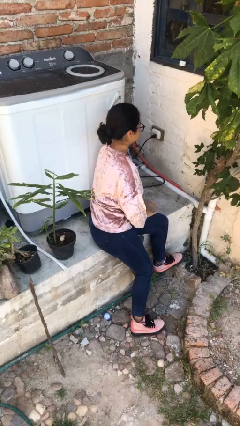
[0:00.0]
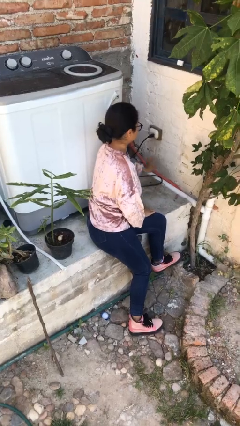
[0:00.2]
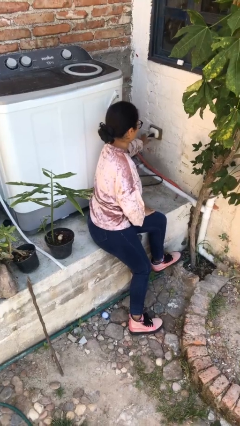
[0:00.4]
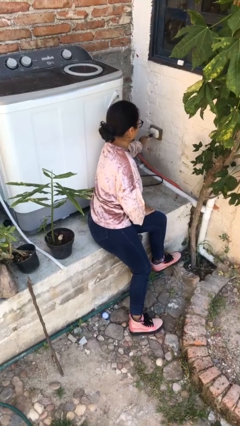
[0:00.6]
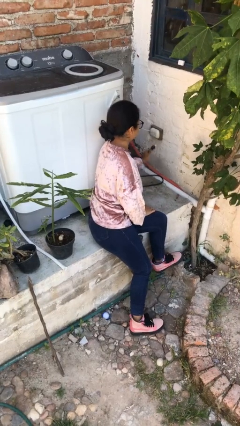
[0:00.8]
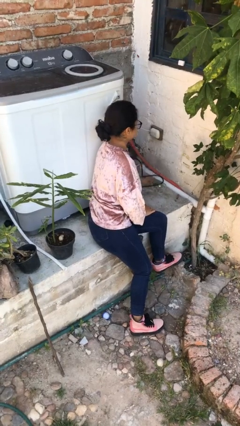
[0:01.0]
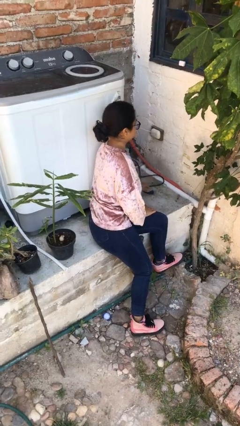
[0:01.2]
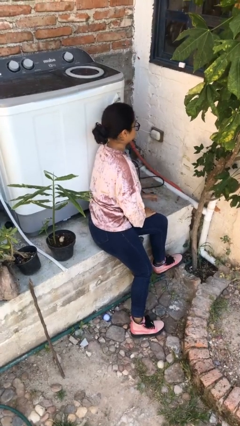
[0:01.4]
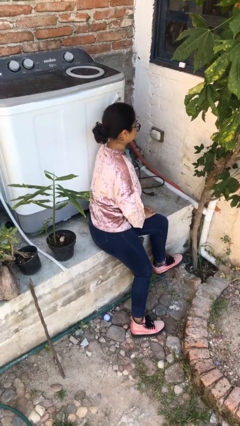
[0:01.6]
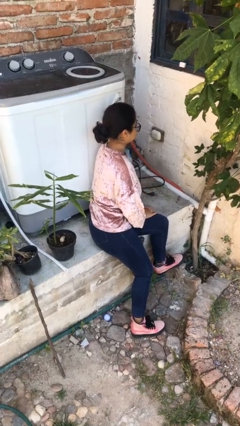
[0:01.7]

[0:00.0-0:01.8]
person unplugs from electrical socket

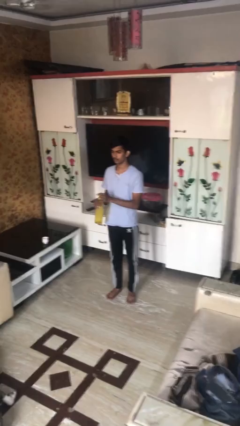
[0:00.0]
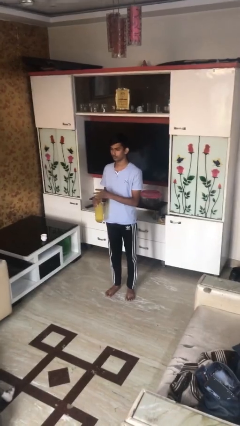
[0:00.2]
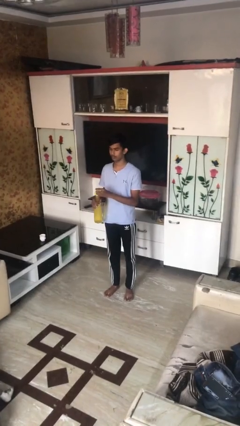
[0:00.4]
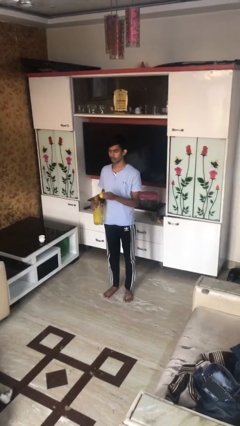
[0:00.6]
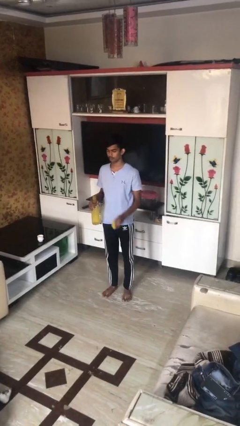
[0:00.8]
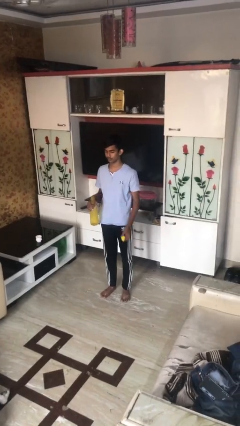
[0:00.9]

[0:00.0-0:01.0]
person unscrews lid from bottle

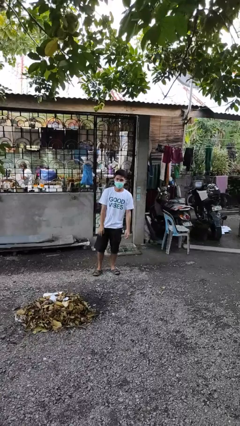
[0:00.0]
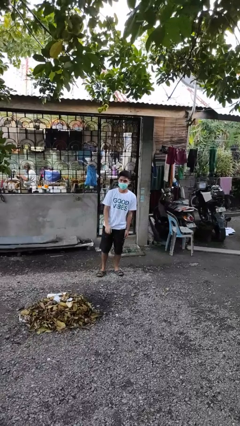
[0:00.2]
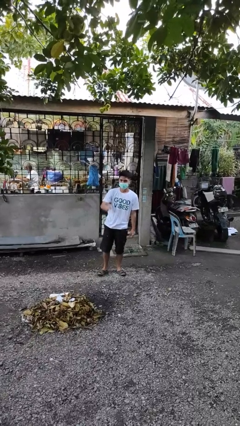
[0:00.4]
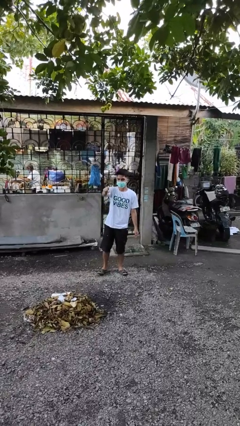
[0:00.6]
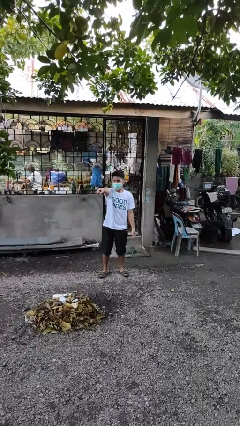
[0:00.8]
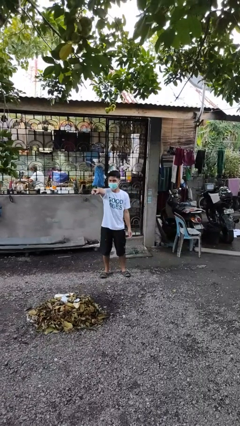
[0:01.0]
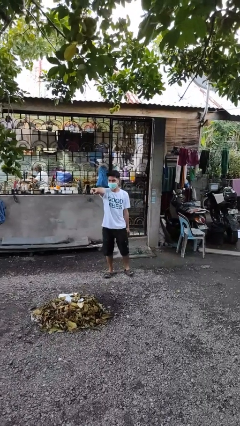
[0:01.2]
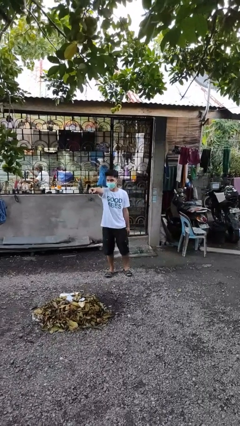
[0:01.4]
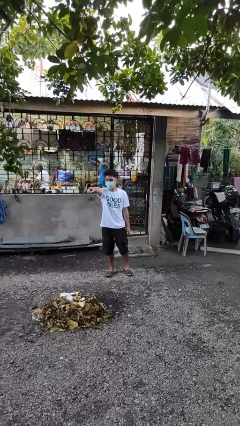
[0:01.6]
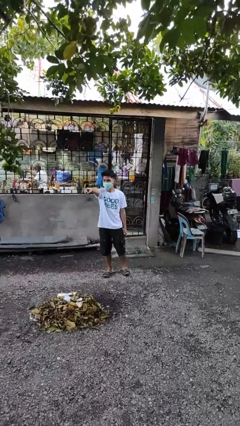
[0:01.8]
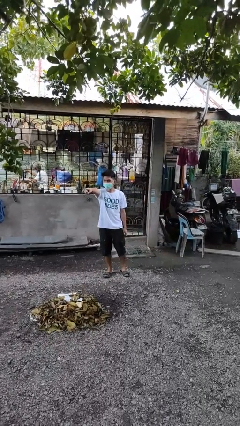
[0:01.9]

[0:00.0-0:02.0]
person points at person

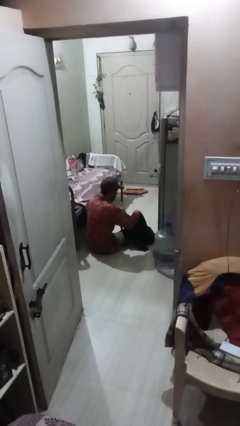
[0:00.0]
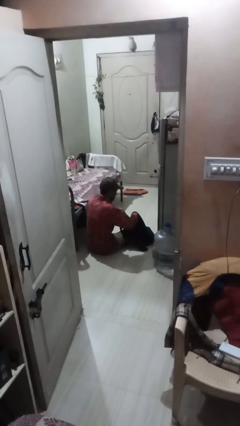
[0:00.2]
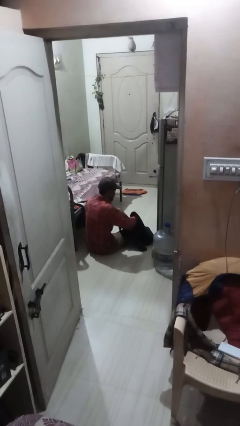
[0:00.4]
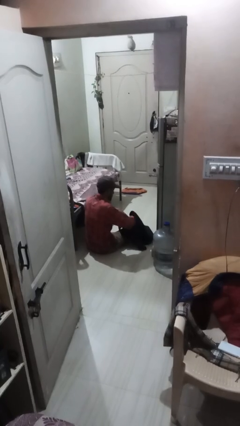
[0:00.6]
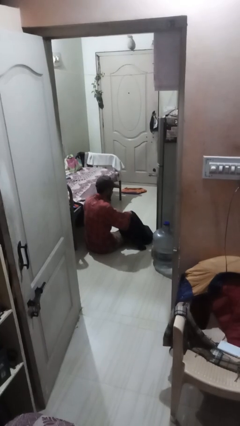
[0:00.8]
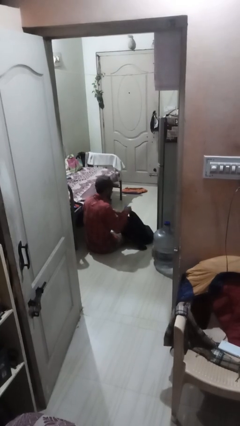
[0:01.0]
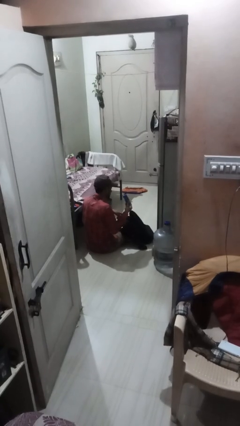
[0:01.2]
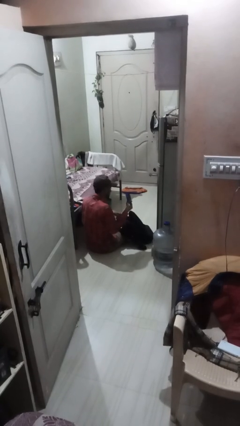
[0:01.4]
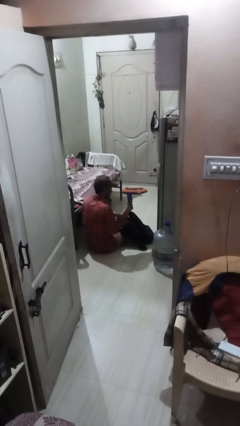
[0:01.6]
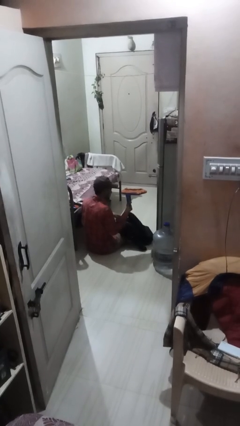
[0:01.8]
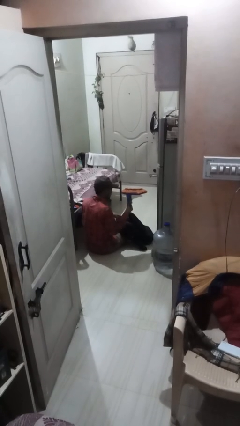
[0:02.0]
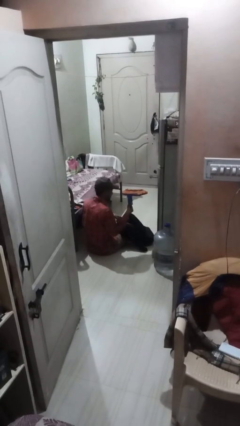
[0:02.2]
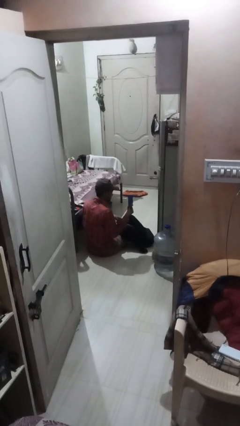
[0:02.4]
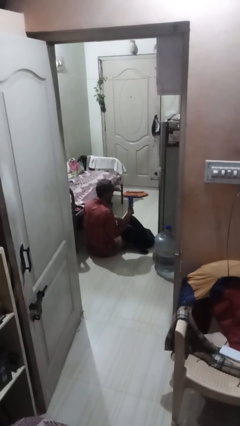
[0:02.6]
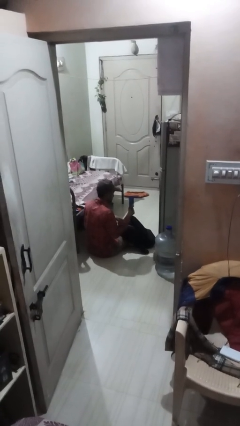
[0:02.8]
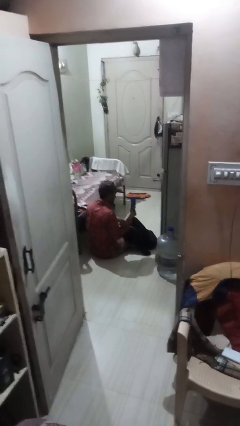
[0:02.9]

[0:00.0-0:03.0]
person takes object from backpack

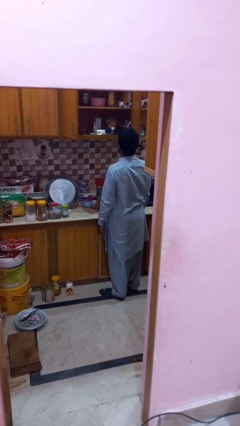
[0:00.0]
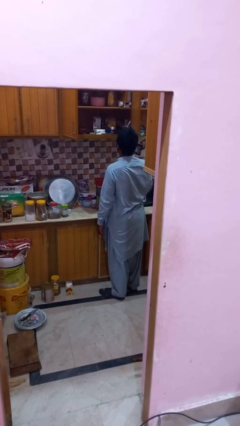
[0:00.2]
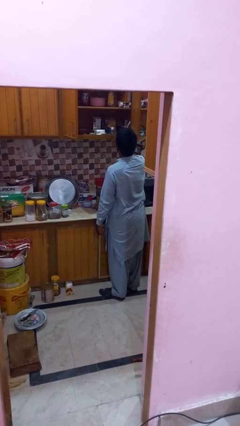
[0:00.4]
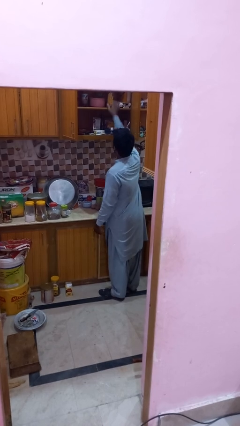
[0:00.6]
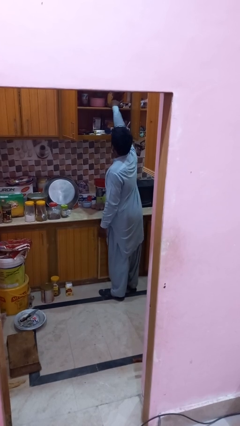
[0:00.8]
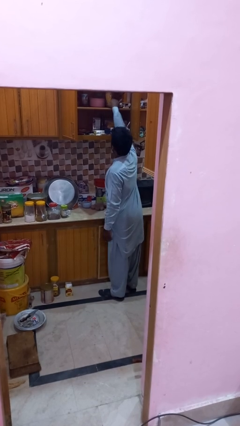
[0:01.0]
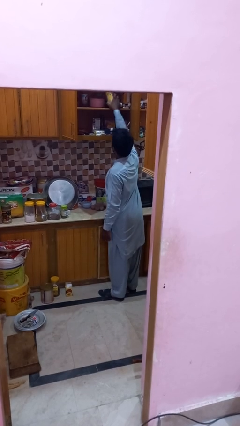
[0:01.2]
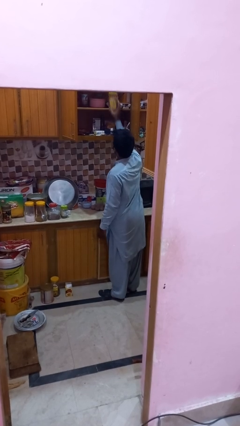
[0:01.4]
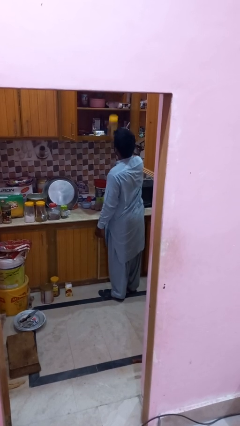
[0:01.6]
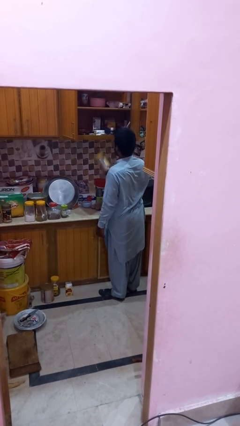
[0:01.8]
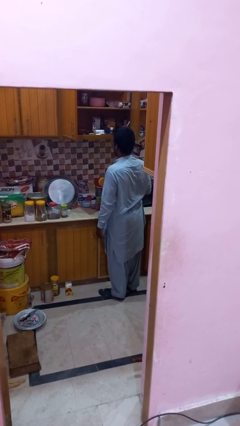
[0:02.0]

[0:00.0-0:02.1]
person takes object from cabinet

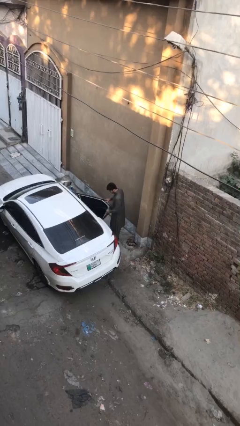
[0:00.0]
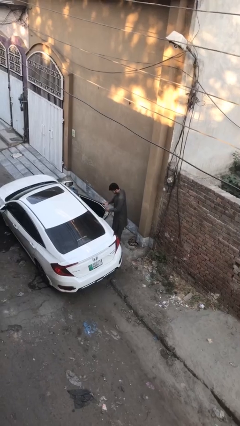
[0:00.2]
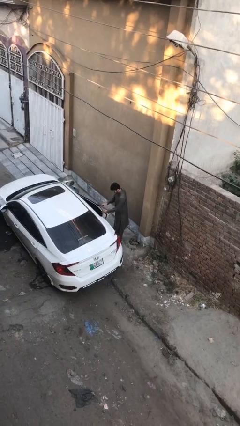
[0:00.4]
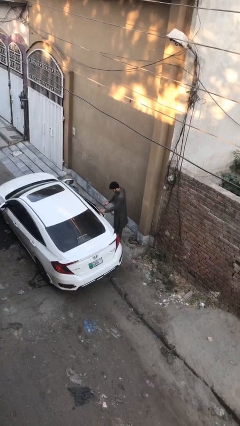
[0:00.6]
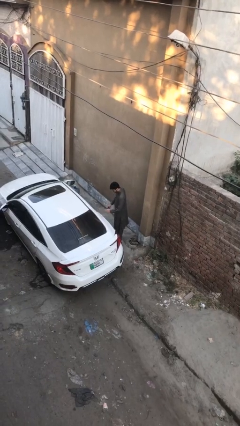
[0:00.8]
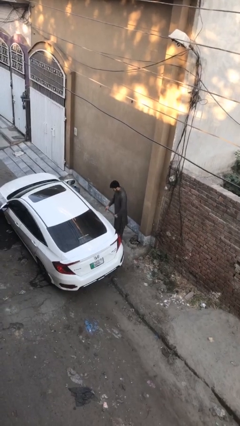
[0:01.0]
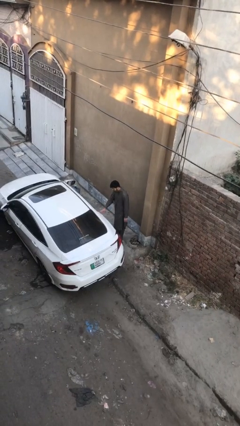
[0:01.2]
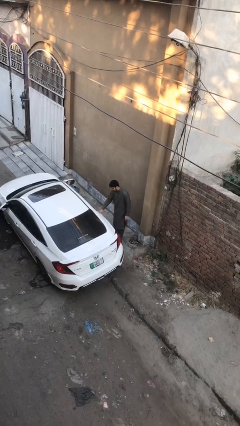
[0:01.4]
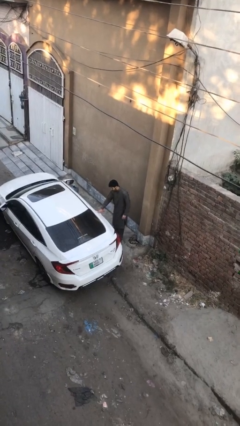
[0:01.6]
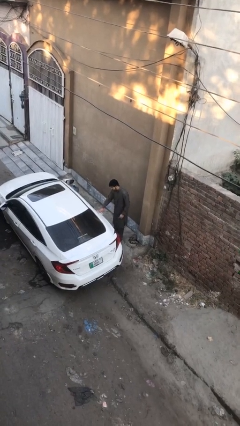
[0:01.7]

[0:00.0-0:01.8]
person closes car door

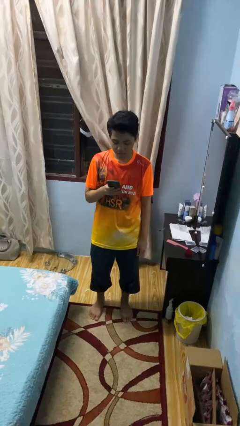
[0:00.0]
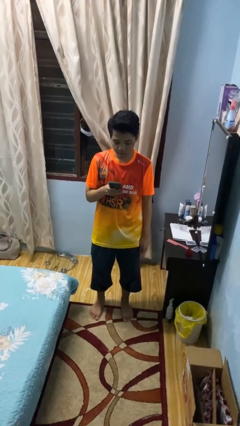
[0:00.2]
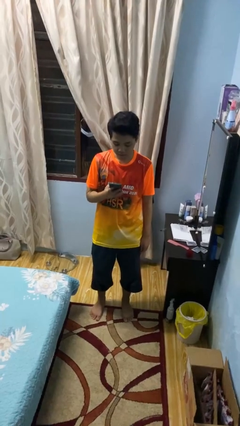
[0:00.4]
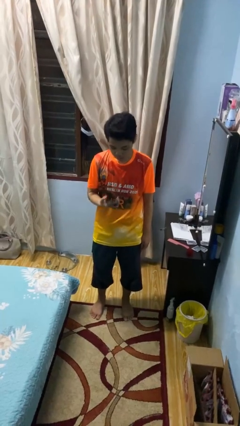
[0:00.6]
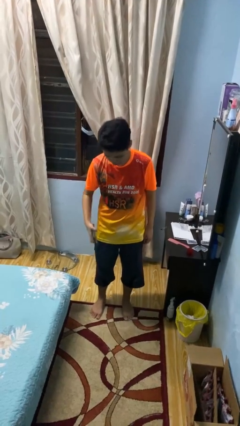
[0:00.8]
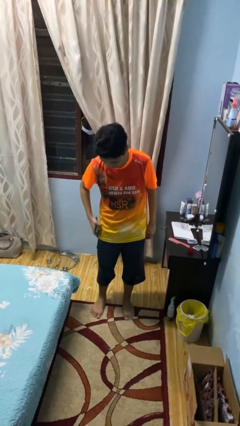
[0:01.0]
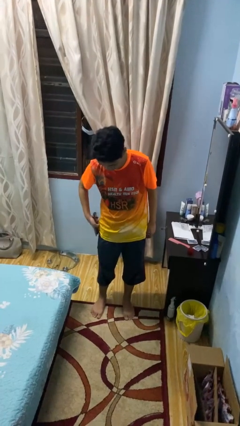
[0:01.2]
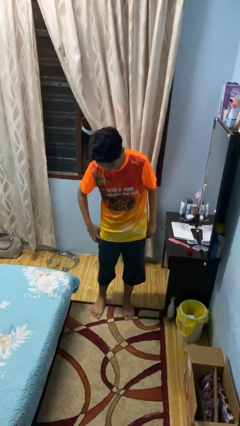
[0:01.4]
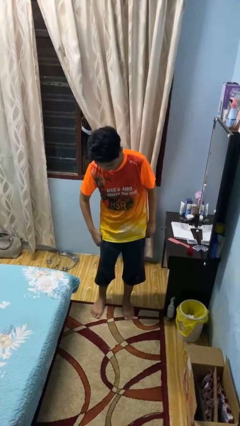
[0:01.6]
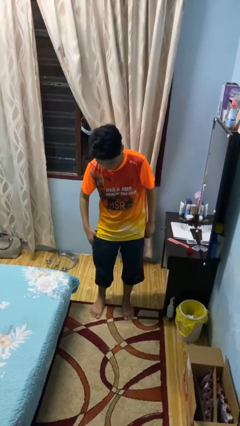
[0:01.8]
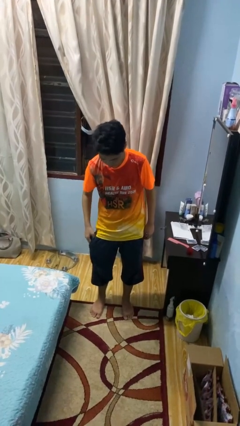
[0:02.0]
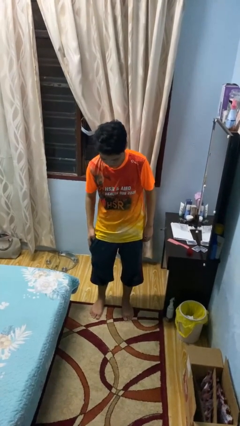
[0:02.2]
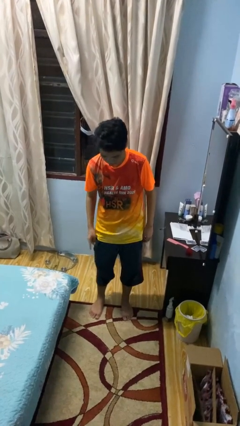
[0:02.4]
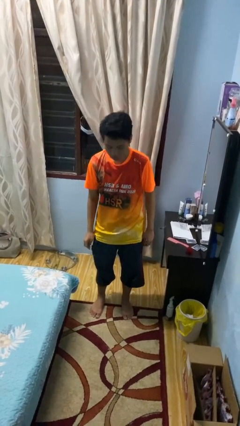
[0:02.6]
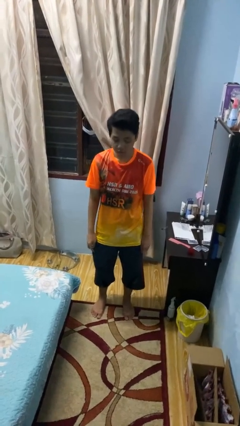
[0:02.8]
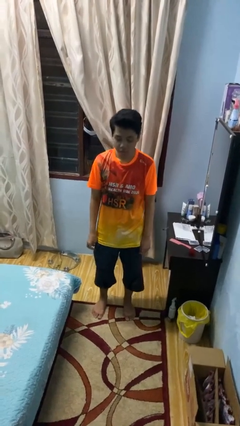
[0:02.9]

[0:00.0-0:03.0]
person puts phone into pocket

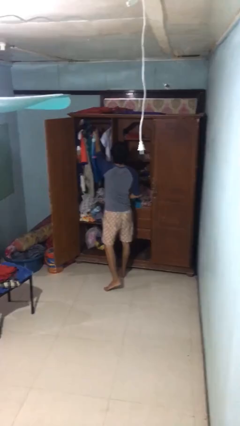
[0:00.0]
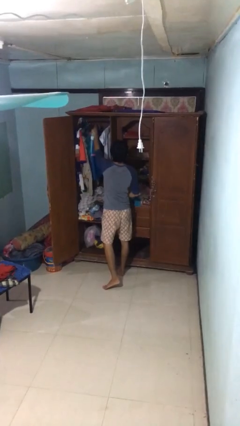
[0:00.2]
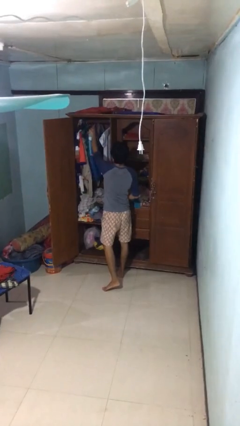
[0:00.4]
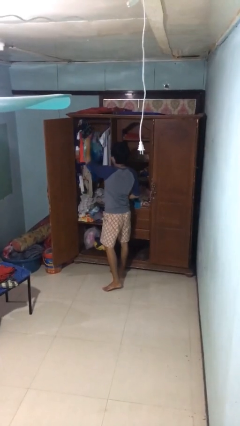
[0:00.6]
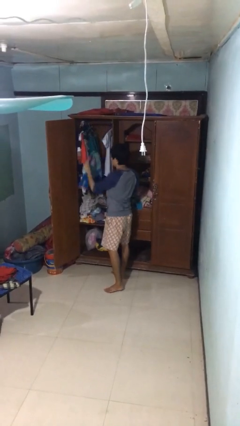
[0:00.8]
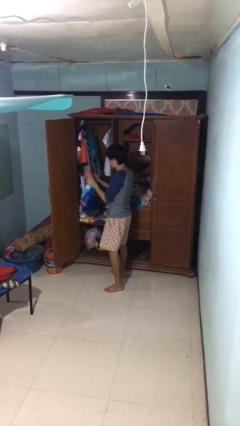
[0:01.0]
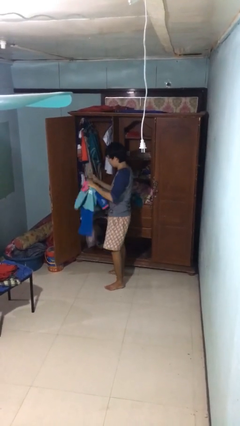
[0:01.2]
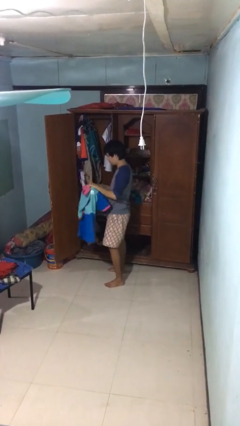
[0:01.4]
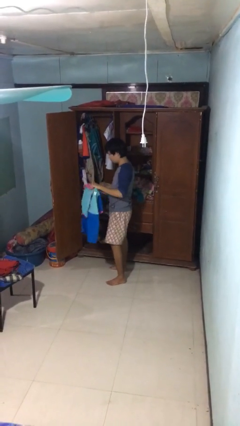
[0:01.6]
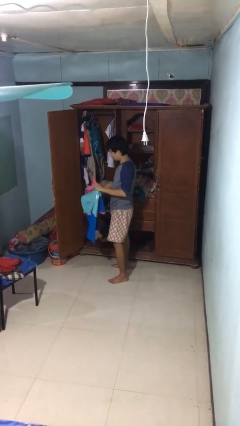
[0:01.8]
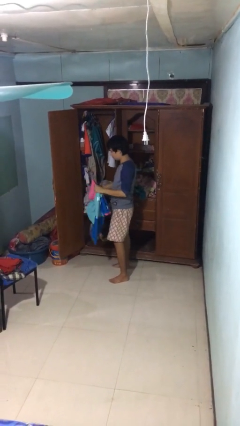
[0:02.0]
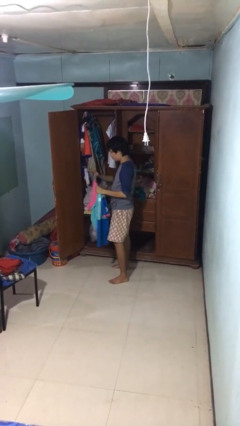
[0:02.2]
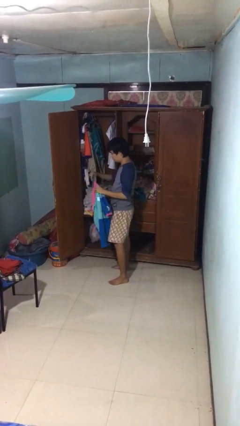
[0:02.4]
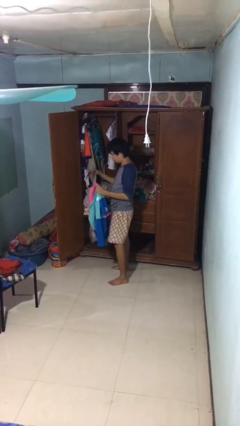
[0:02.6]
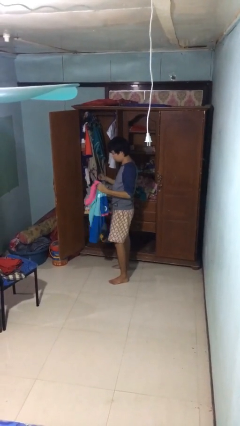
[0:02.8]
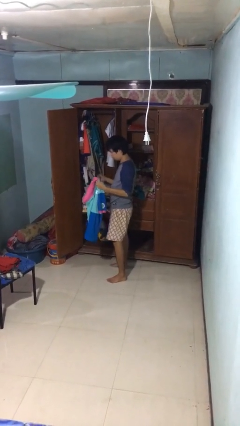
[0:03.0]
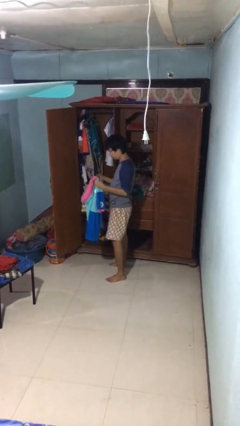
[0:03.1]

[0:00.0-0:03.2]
person takes clothes from closet
